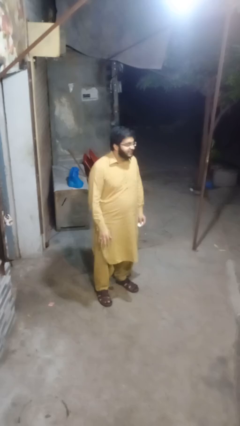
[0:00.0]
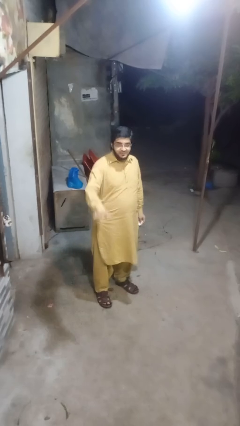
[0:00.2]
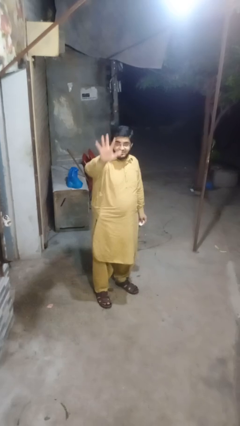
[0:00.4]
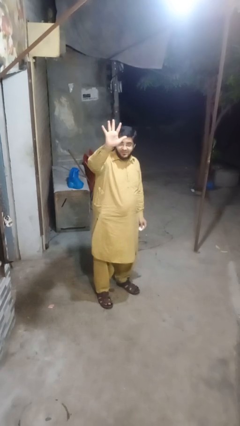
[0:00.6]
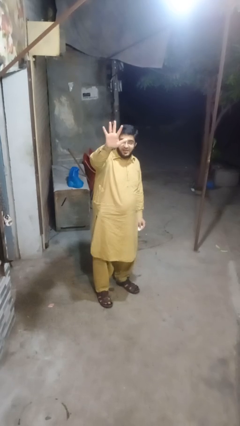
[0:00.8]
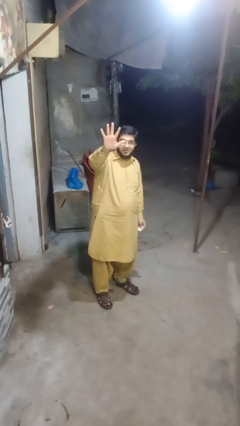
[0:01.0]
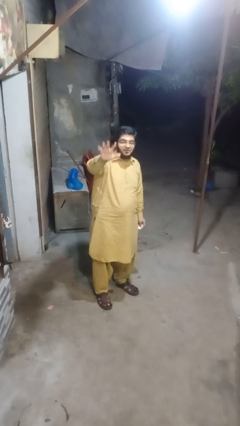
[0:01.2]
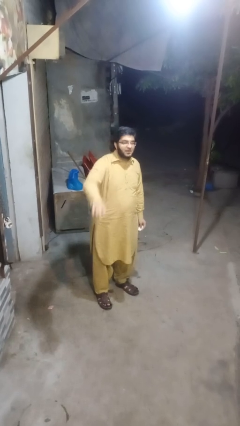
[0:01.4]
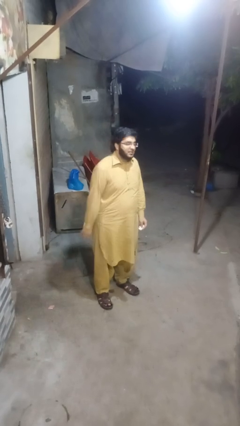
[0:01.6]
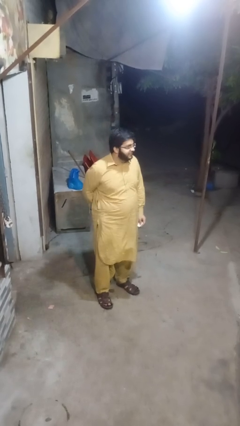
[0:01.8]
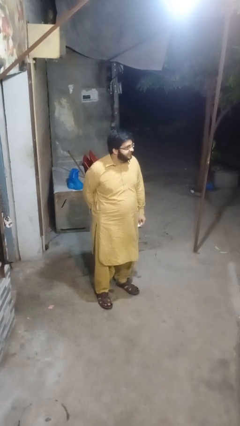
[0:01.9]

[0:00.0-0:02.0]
person gestures number five

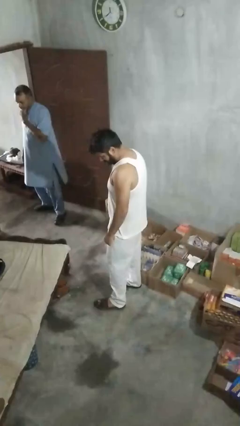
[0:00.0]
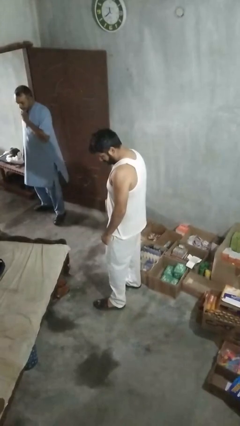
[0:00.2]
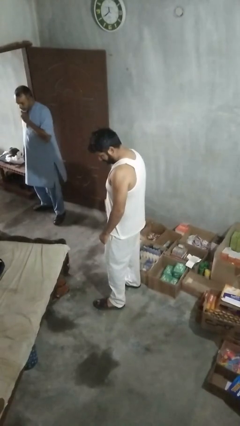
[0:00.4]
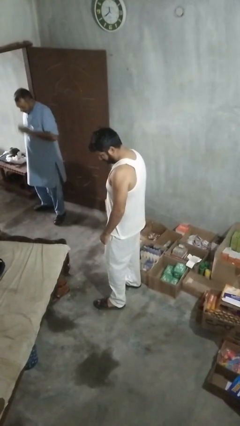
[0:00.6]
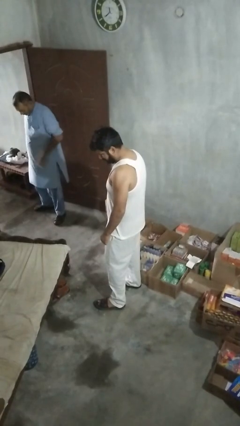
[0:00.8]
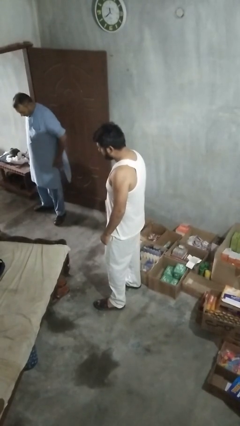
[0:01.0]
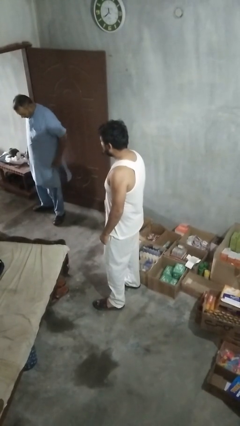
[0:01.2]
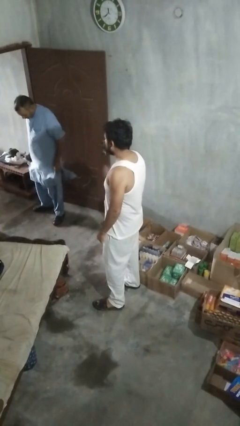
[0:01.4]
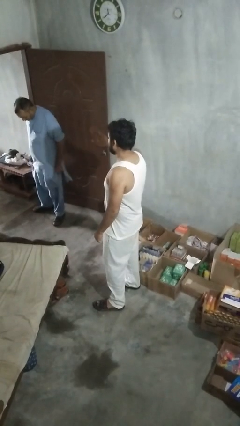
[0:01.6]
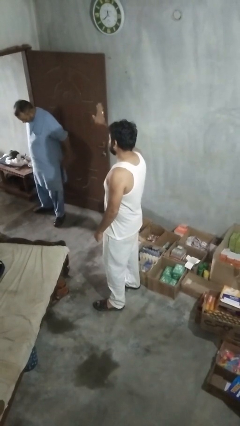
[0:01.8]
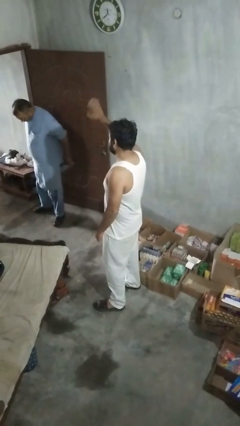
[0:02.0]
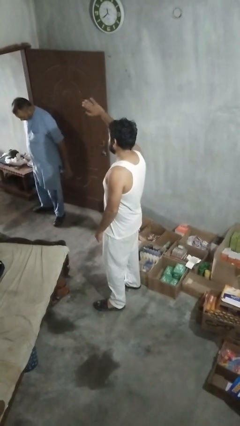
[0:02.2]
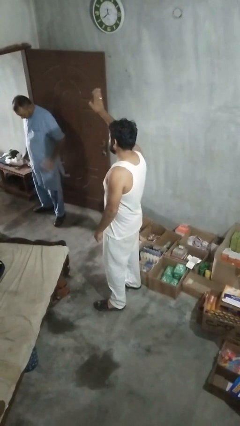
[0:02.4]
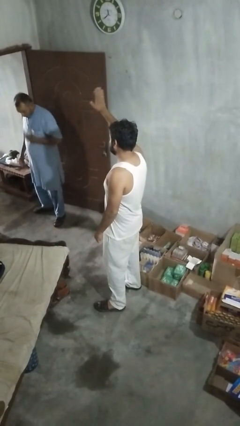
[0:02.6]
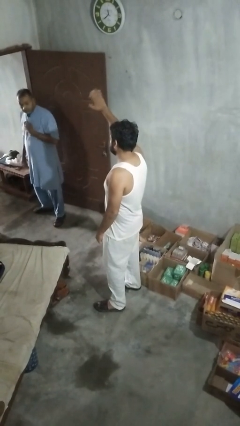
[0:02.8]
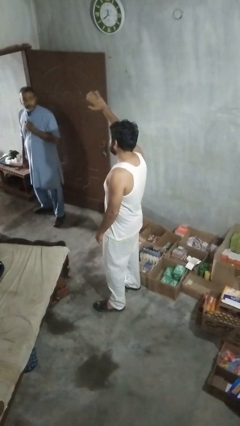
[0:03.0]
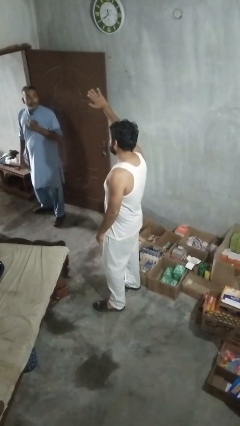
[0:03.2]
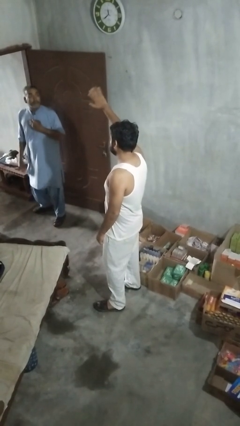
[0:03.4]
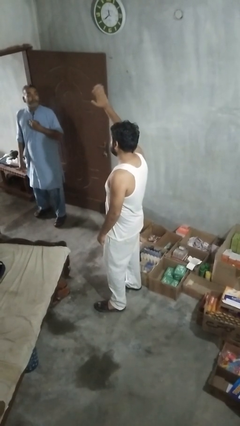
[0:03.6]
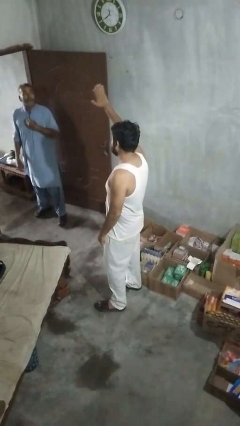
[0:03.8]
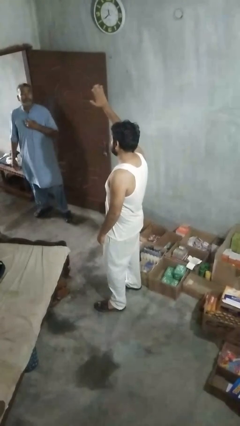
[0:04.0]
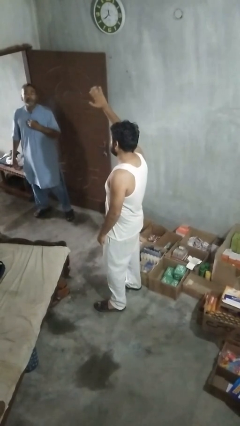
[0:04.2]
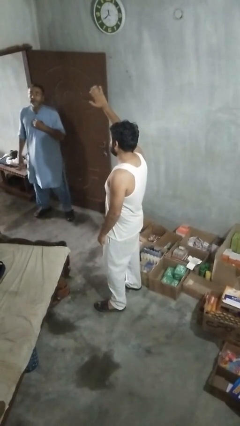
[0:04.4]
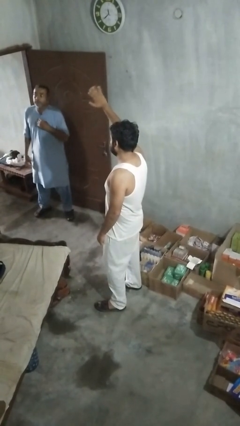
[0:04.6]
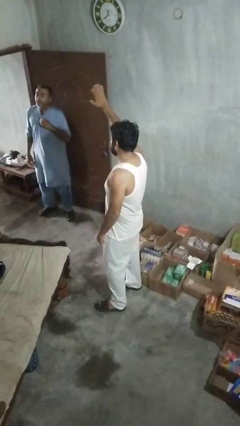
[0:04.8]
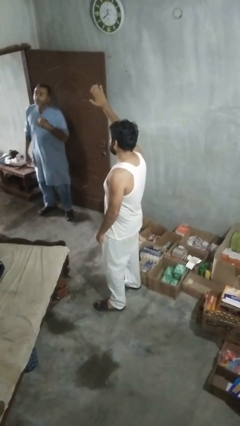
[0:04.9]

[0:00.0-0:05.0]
person waves at person

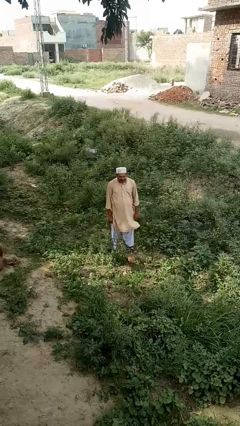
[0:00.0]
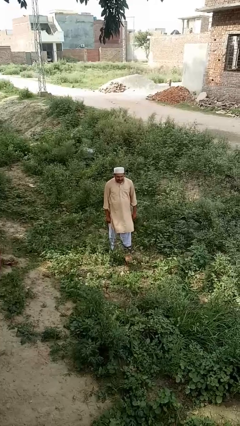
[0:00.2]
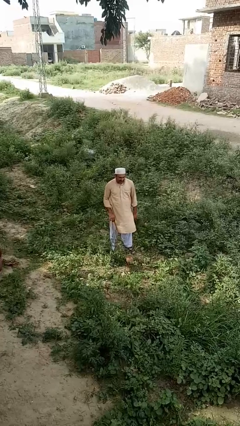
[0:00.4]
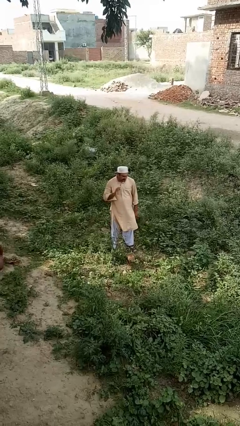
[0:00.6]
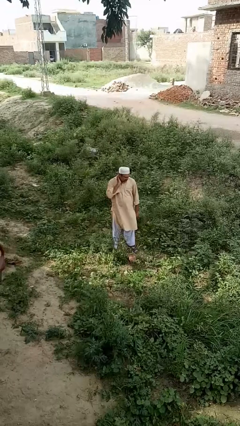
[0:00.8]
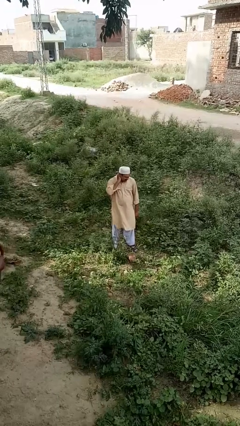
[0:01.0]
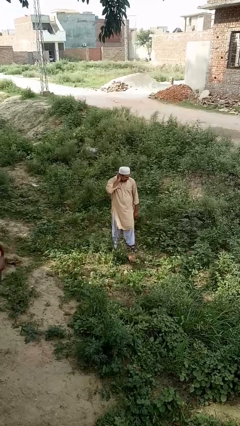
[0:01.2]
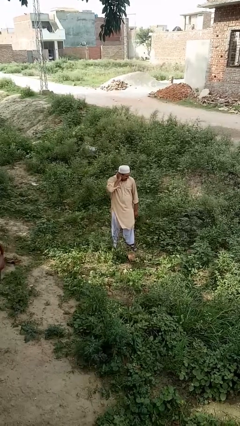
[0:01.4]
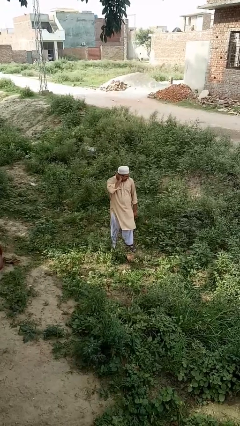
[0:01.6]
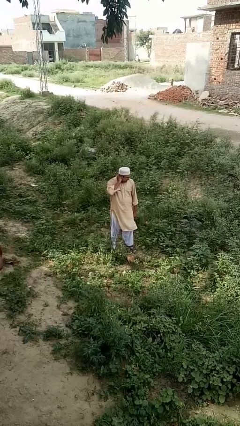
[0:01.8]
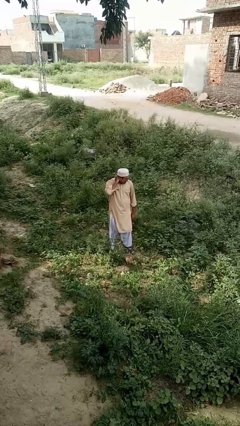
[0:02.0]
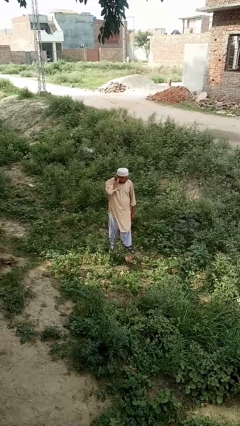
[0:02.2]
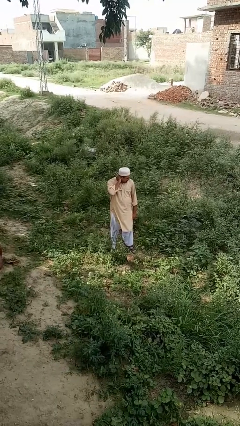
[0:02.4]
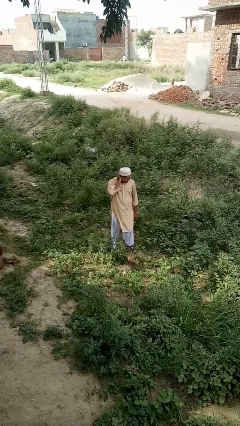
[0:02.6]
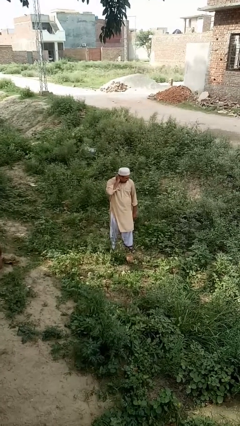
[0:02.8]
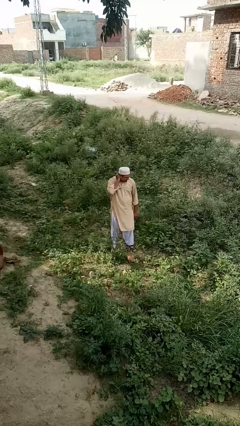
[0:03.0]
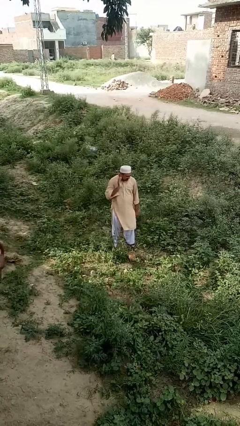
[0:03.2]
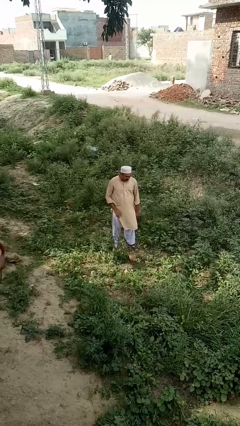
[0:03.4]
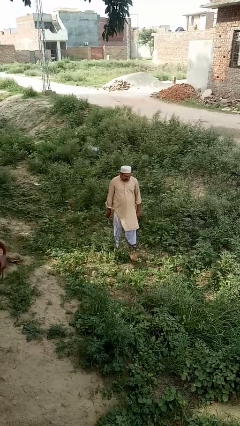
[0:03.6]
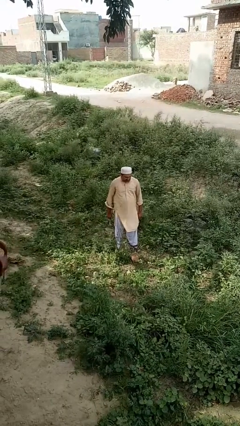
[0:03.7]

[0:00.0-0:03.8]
person rubs neck

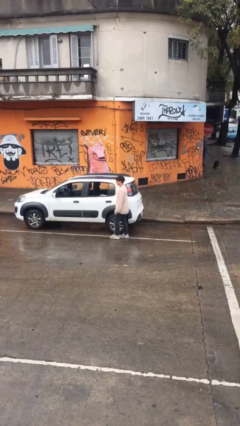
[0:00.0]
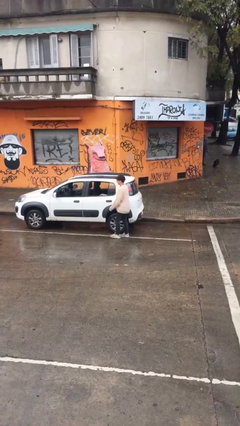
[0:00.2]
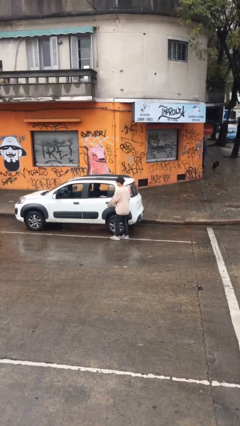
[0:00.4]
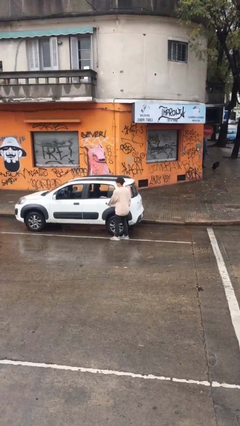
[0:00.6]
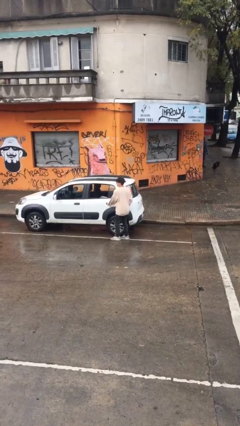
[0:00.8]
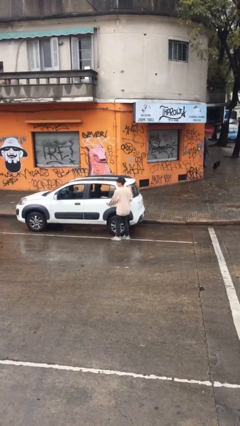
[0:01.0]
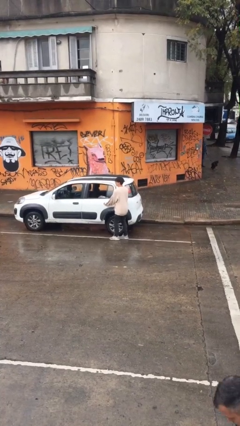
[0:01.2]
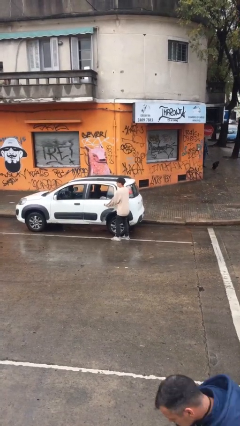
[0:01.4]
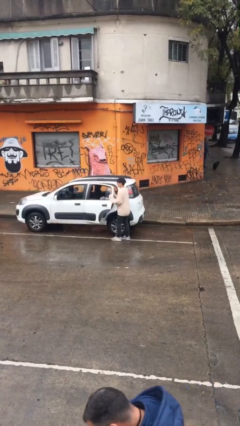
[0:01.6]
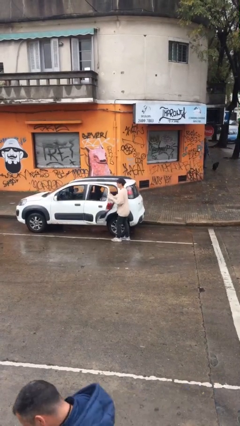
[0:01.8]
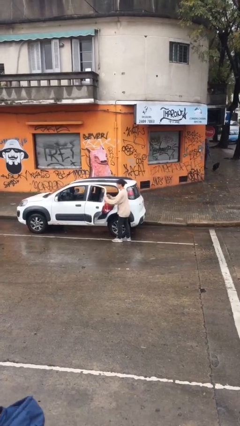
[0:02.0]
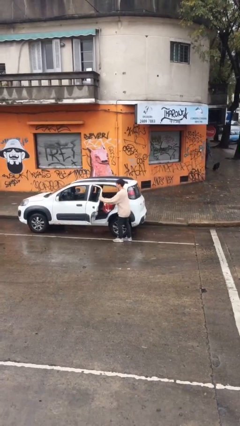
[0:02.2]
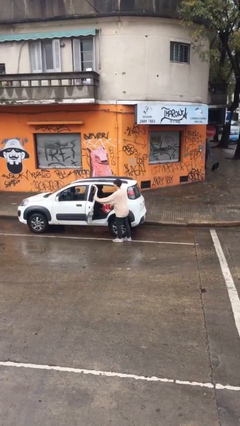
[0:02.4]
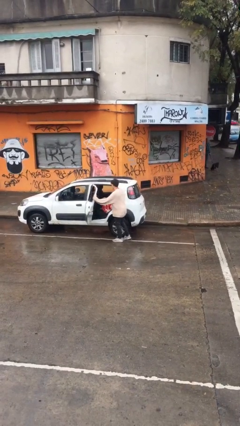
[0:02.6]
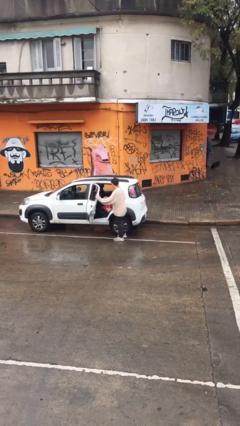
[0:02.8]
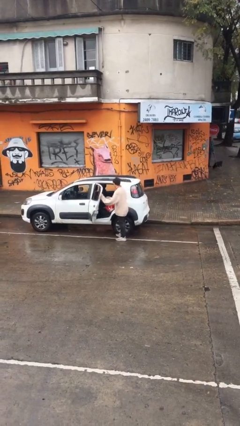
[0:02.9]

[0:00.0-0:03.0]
person opens car door

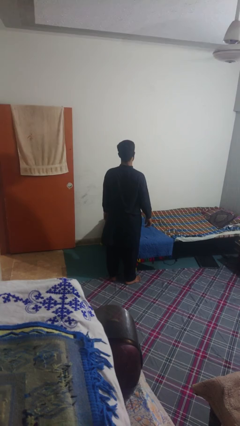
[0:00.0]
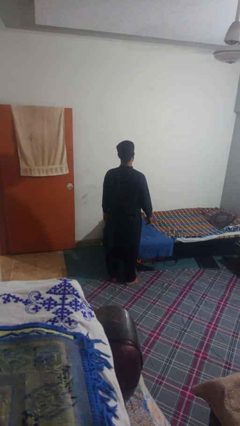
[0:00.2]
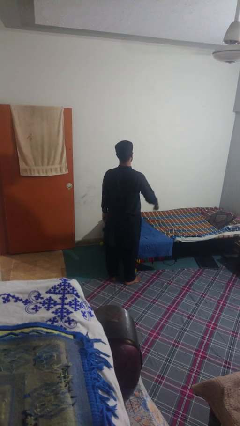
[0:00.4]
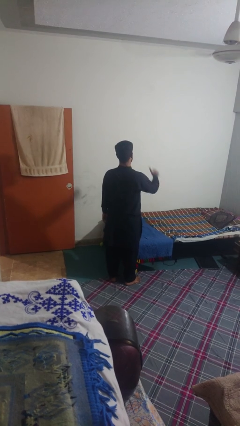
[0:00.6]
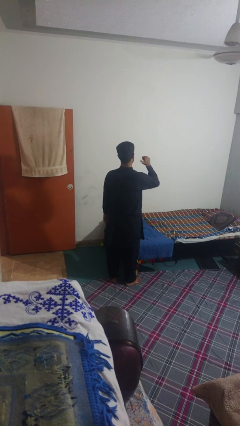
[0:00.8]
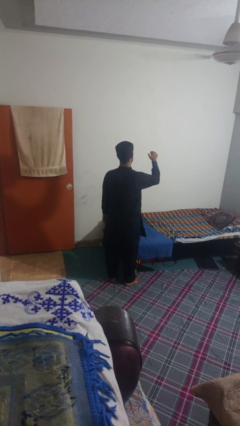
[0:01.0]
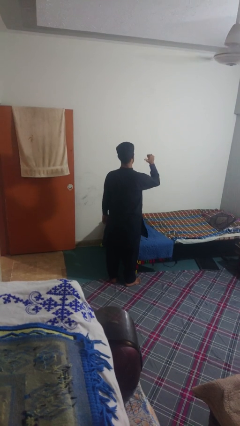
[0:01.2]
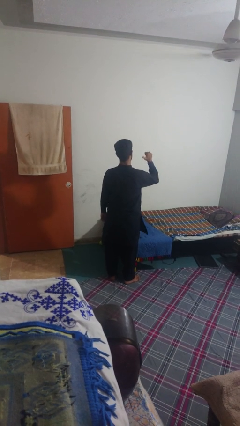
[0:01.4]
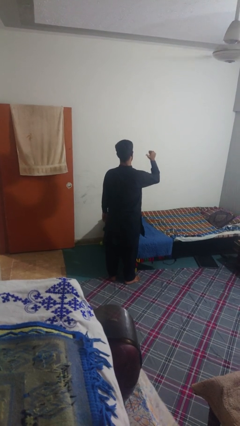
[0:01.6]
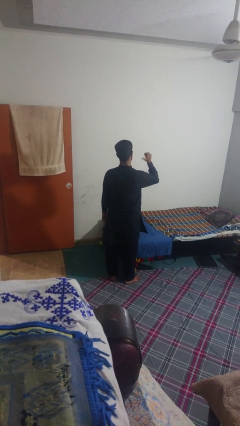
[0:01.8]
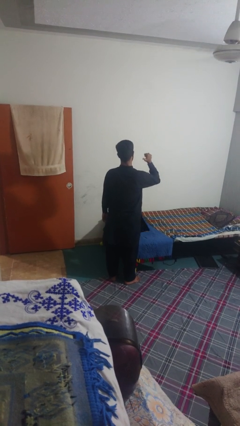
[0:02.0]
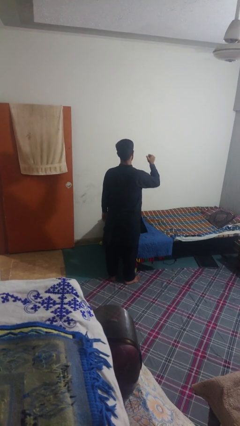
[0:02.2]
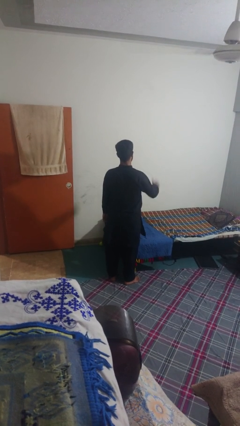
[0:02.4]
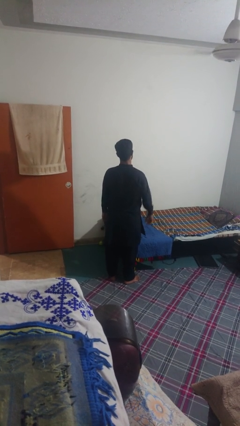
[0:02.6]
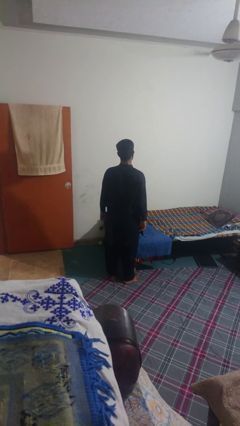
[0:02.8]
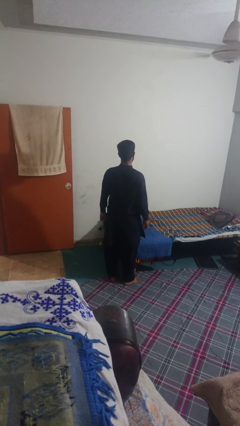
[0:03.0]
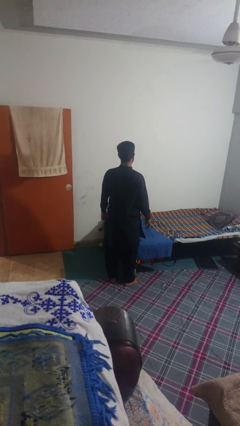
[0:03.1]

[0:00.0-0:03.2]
person gestures behind me

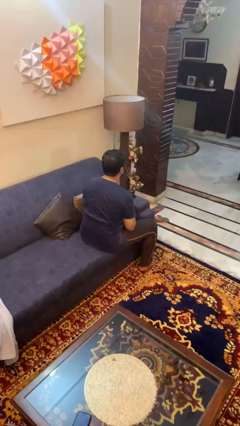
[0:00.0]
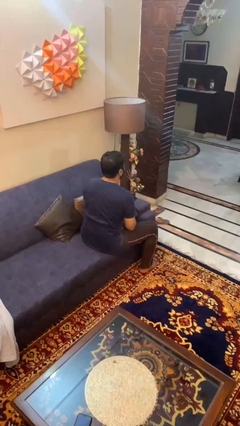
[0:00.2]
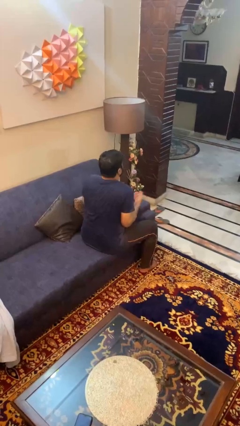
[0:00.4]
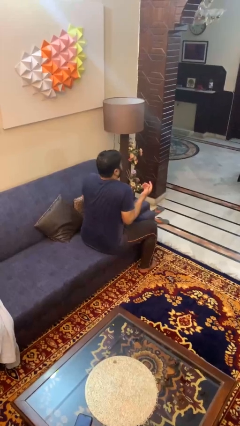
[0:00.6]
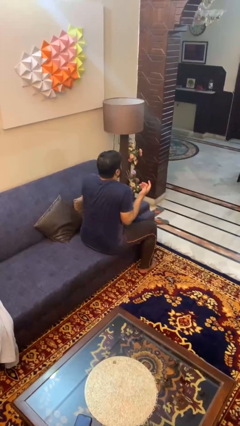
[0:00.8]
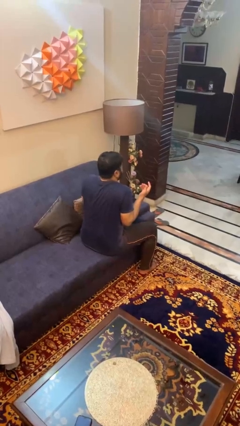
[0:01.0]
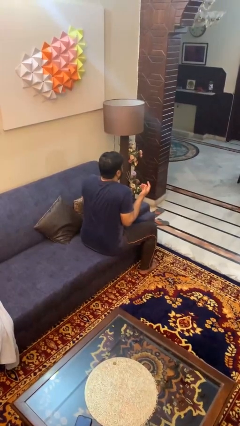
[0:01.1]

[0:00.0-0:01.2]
person shrugs
